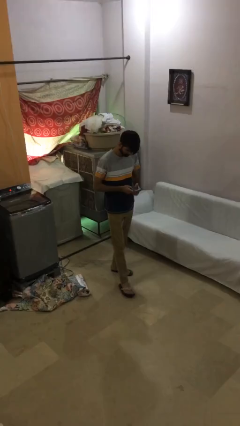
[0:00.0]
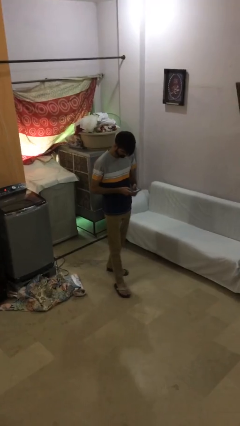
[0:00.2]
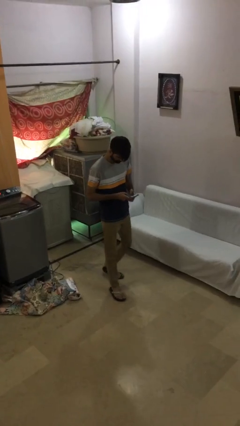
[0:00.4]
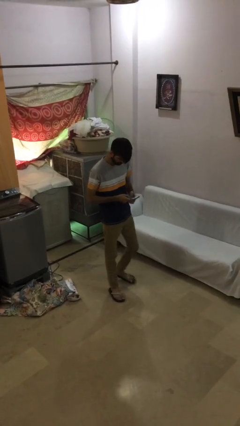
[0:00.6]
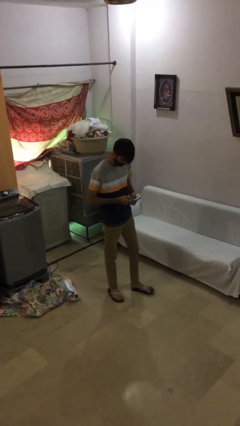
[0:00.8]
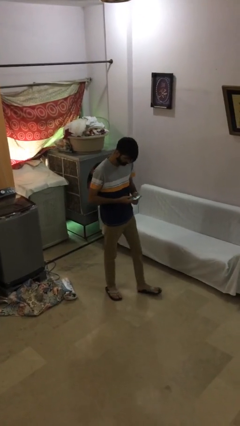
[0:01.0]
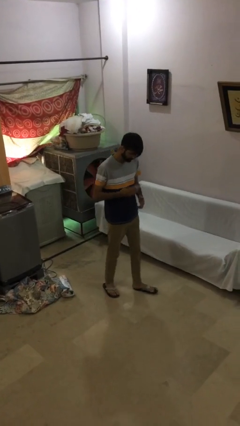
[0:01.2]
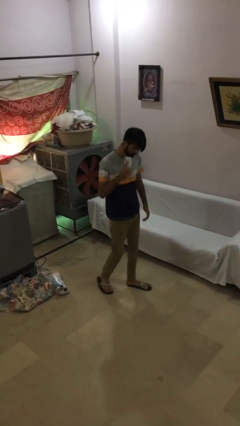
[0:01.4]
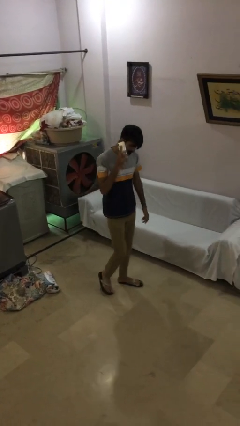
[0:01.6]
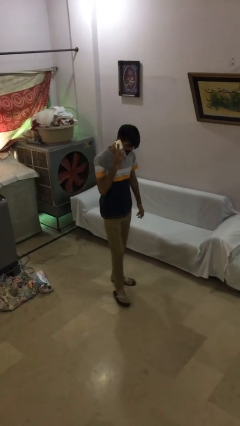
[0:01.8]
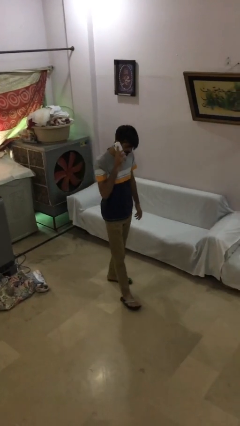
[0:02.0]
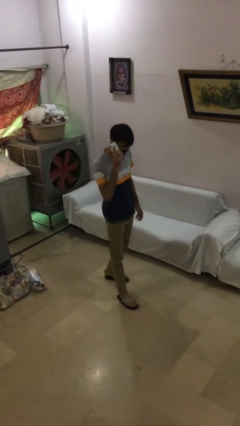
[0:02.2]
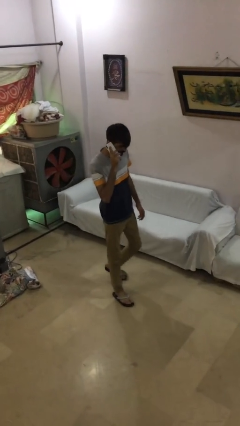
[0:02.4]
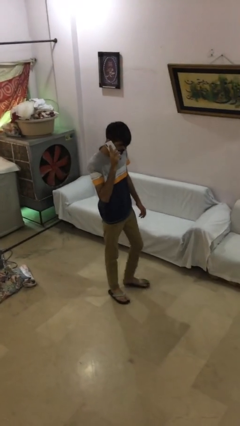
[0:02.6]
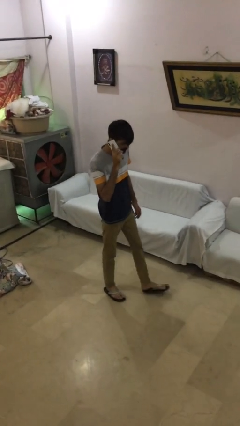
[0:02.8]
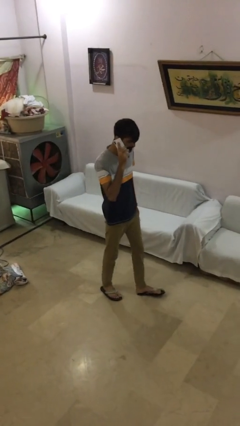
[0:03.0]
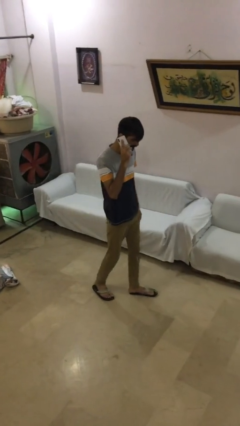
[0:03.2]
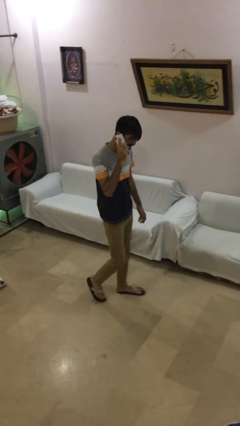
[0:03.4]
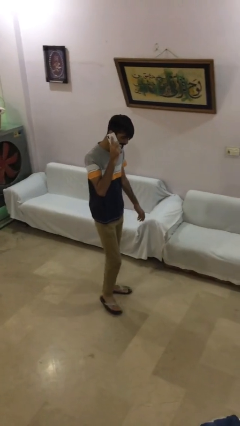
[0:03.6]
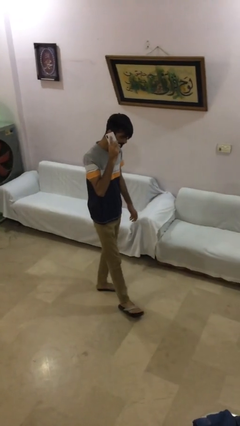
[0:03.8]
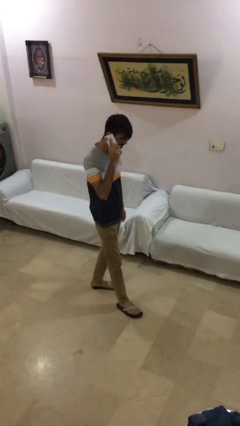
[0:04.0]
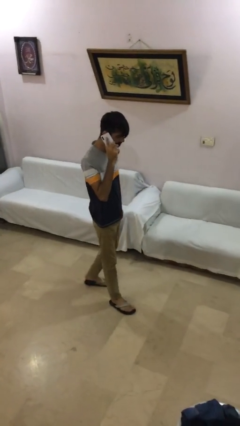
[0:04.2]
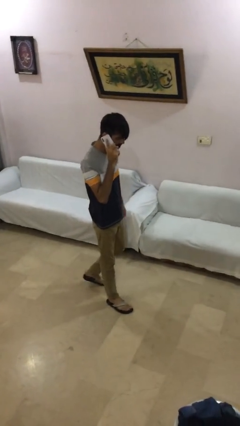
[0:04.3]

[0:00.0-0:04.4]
person talks on phone

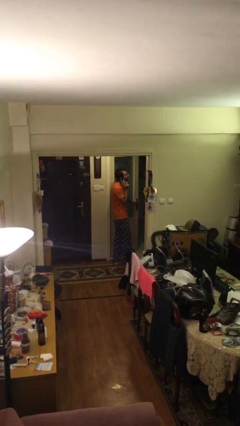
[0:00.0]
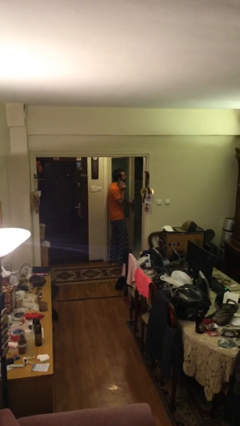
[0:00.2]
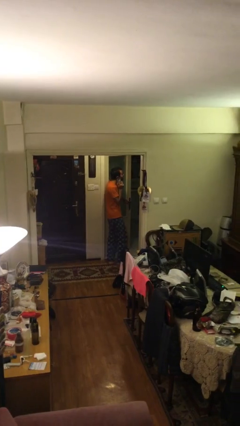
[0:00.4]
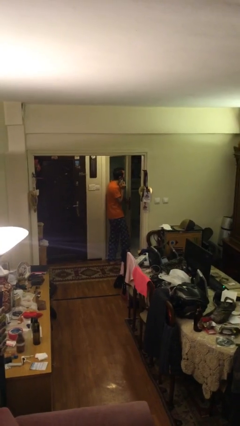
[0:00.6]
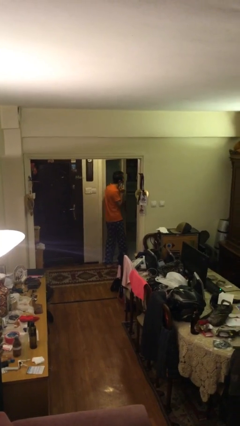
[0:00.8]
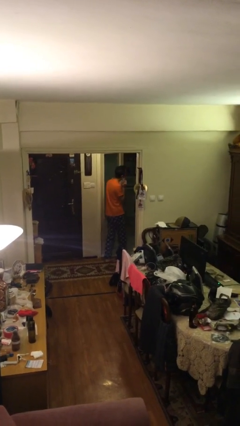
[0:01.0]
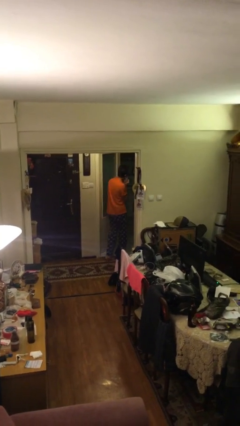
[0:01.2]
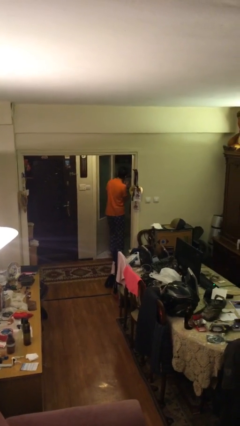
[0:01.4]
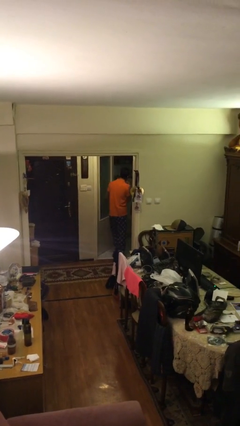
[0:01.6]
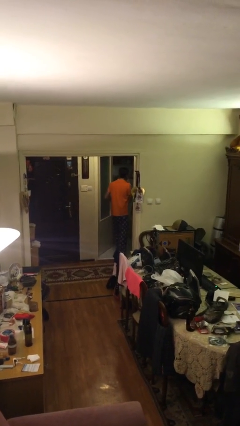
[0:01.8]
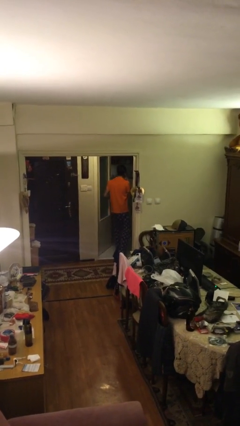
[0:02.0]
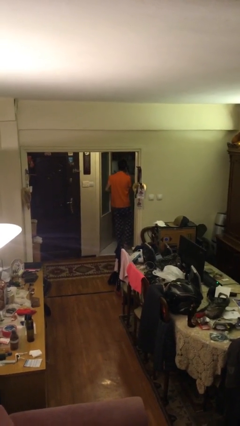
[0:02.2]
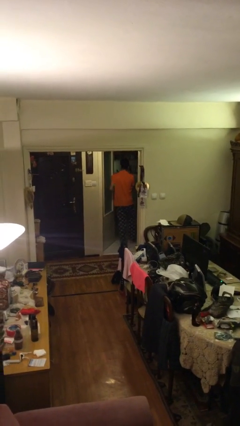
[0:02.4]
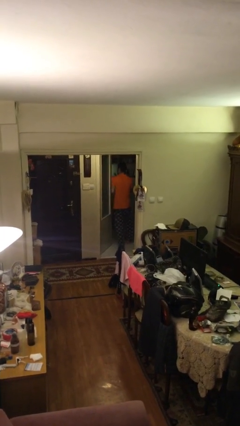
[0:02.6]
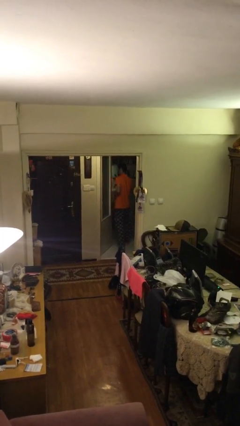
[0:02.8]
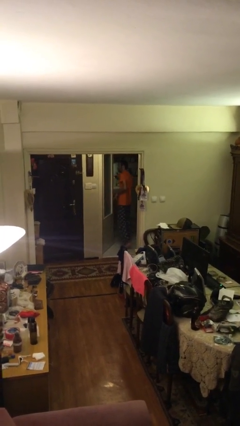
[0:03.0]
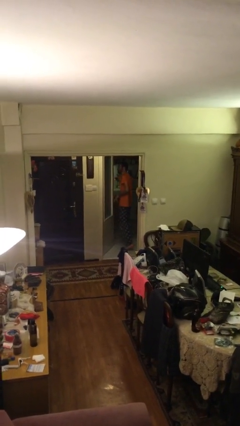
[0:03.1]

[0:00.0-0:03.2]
person exits scene through structure

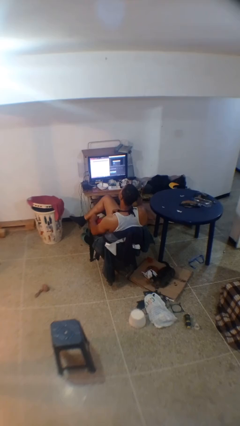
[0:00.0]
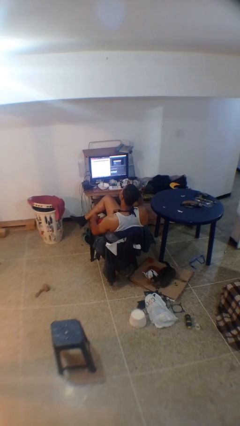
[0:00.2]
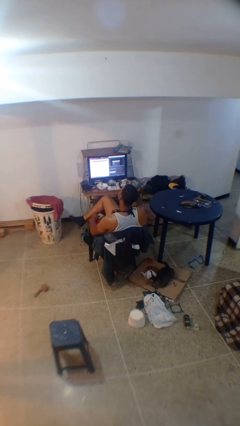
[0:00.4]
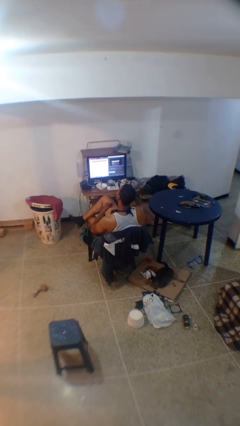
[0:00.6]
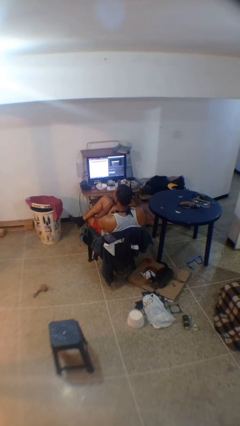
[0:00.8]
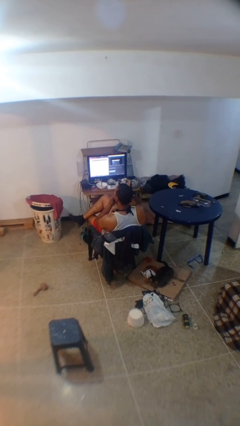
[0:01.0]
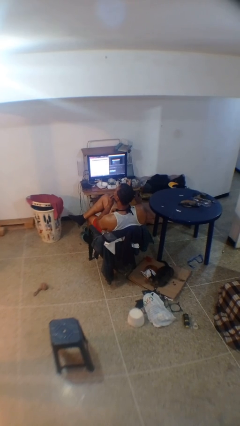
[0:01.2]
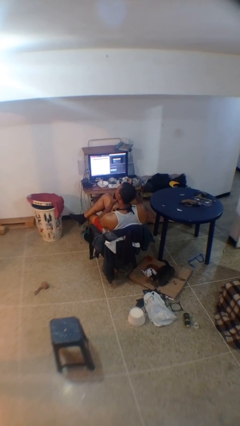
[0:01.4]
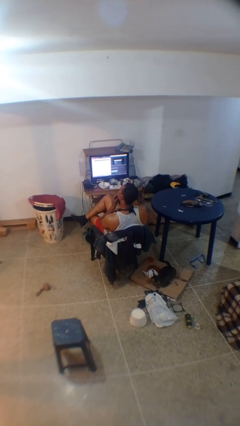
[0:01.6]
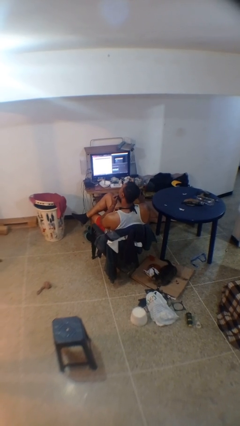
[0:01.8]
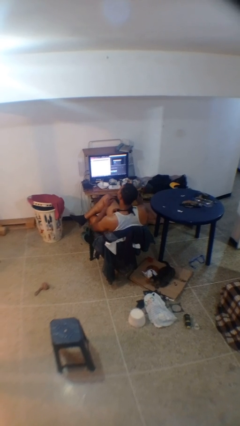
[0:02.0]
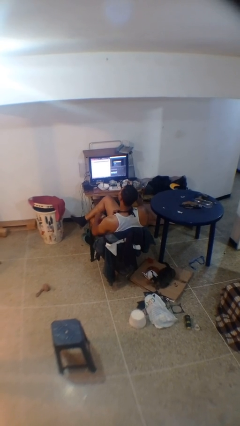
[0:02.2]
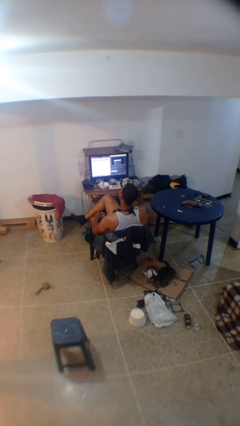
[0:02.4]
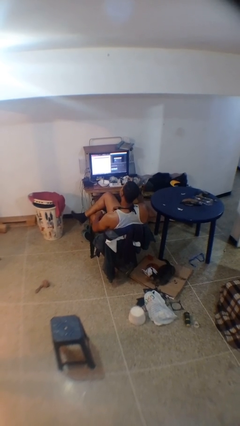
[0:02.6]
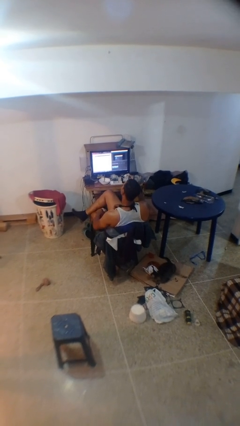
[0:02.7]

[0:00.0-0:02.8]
person strokes chin

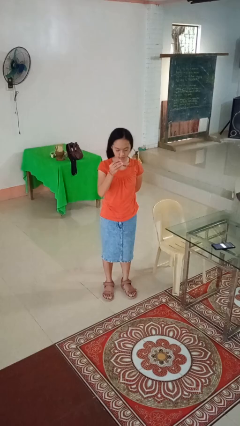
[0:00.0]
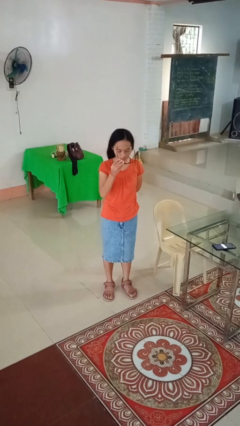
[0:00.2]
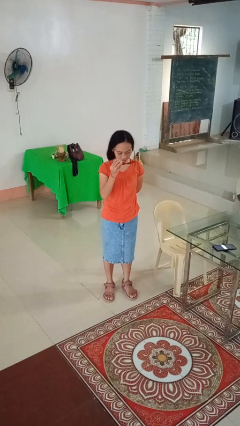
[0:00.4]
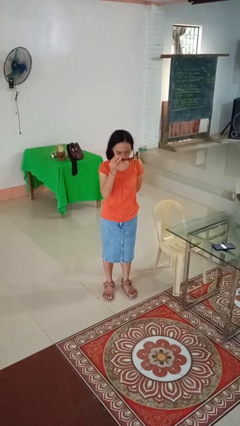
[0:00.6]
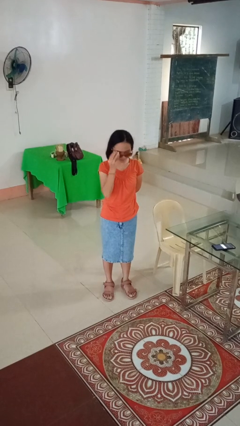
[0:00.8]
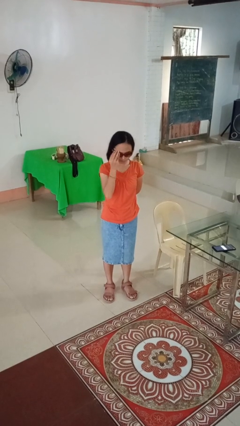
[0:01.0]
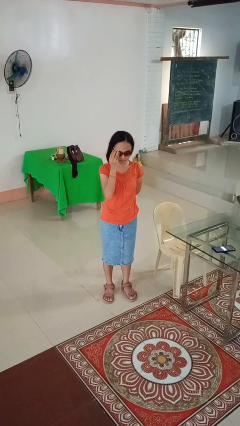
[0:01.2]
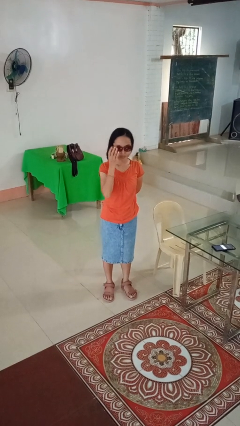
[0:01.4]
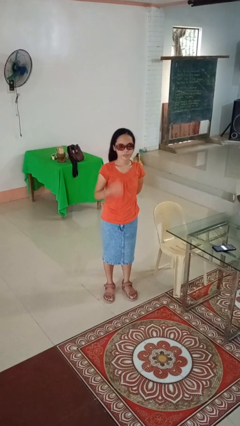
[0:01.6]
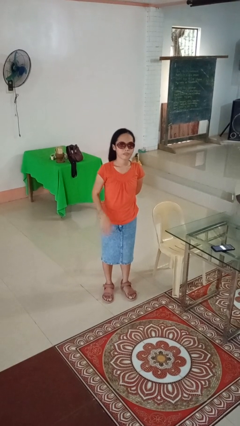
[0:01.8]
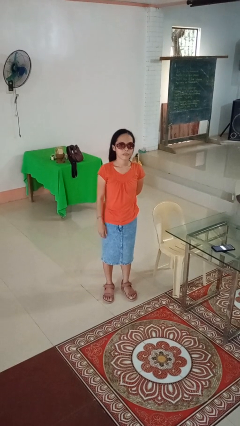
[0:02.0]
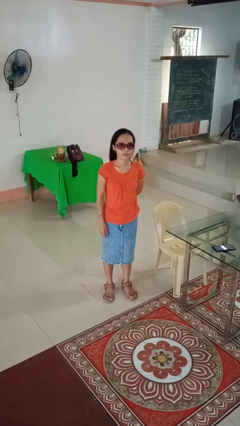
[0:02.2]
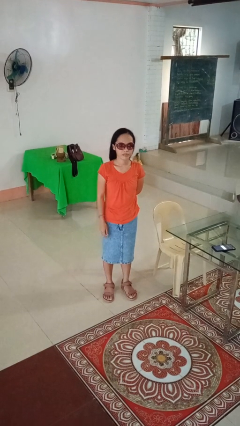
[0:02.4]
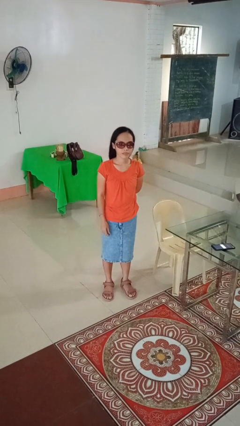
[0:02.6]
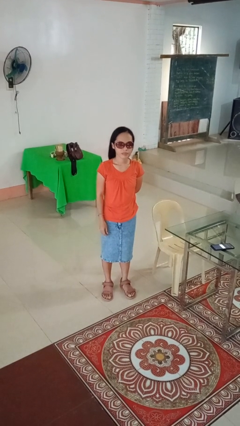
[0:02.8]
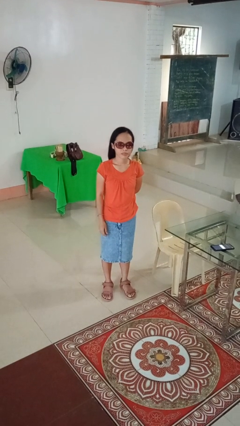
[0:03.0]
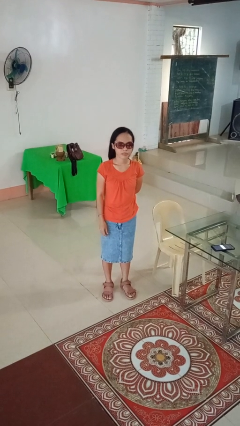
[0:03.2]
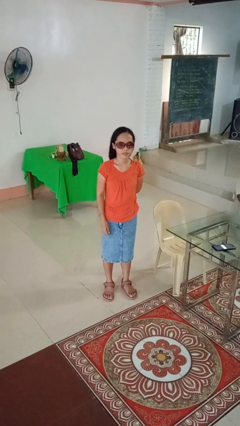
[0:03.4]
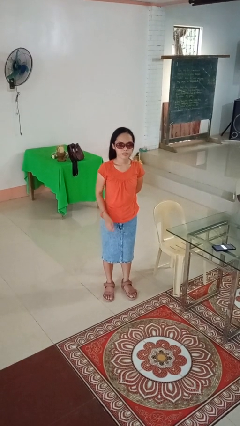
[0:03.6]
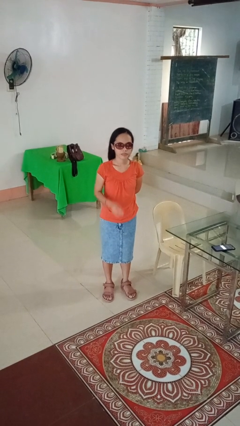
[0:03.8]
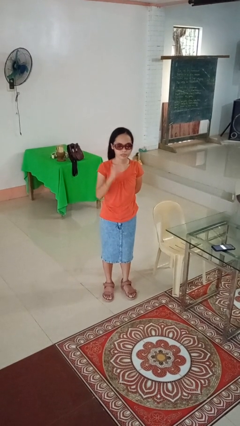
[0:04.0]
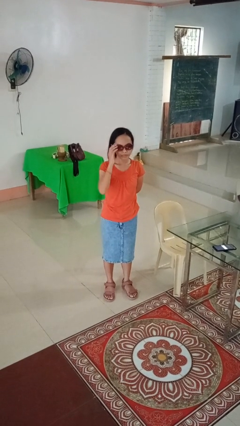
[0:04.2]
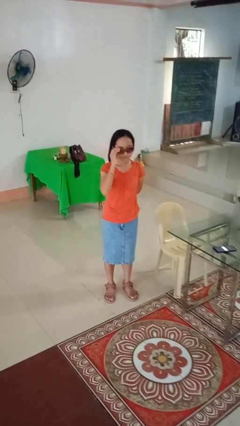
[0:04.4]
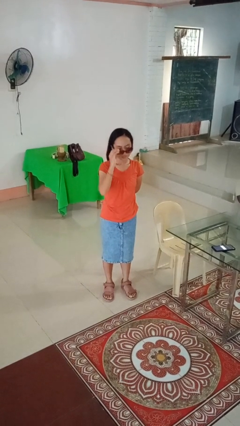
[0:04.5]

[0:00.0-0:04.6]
person puts on sunglasses

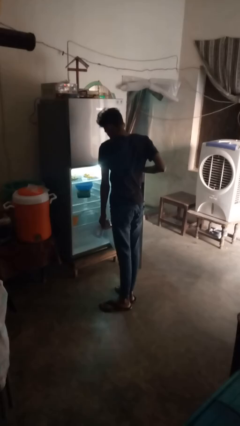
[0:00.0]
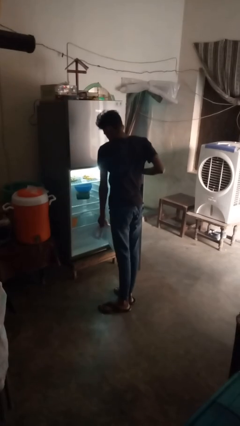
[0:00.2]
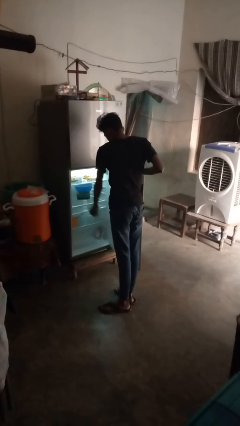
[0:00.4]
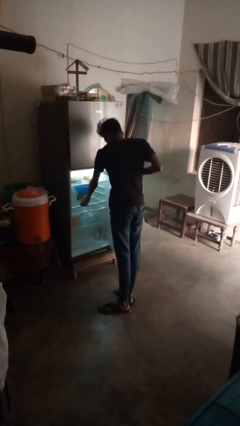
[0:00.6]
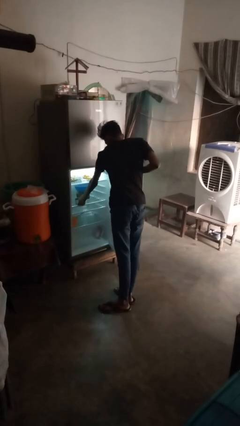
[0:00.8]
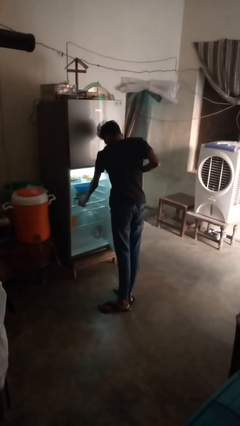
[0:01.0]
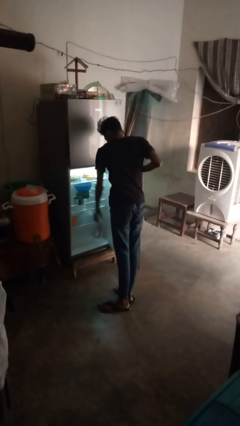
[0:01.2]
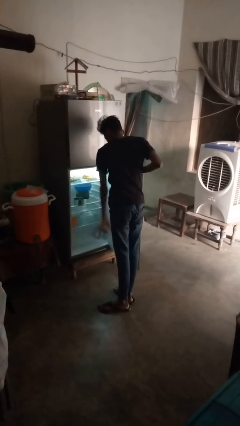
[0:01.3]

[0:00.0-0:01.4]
person puts object into refrigerator

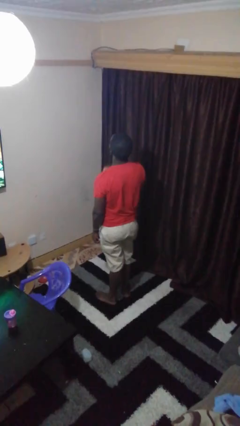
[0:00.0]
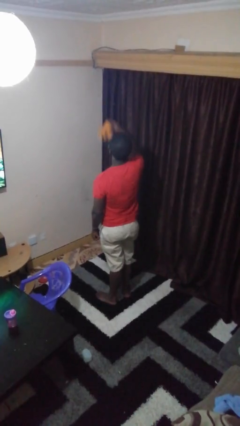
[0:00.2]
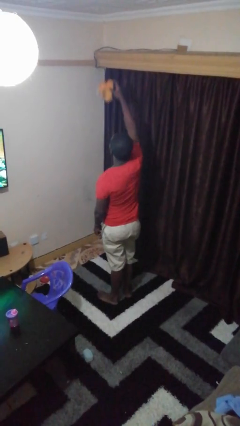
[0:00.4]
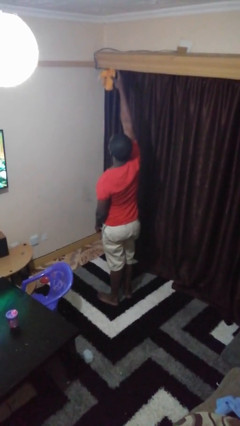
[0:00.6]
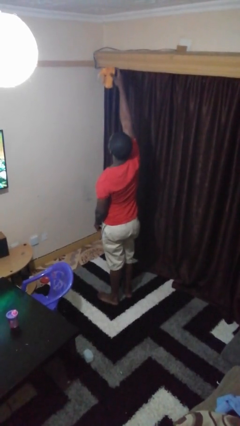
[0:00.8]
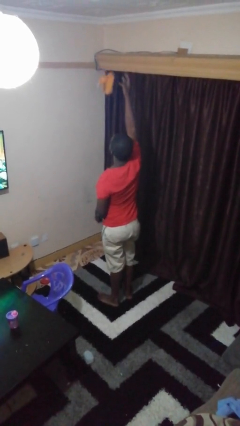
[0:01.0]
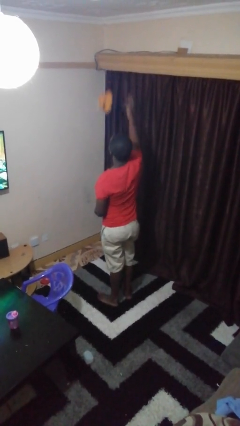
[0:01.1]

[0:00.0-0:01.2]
person drops object
